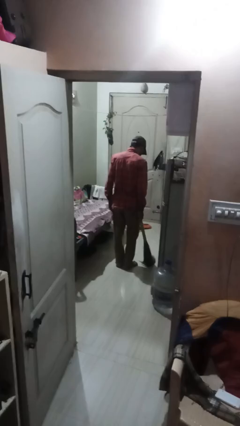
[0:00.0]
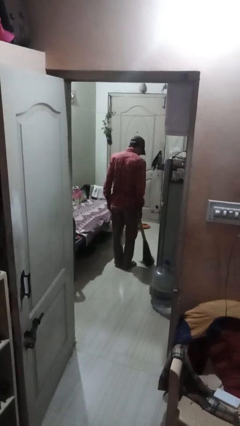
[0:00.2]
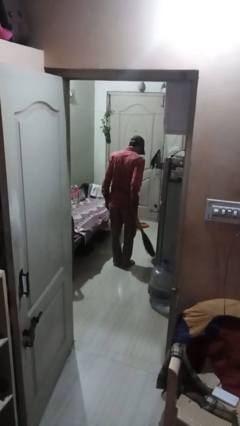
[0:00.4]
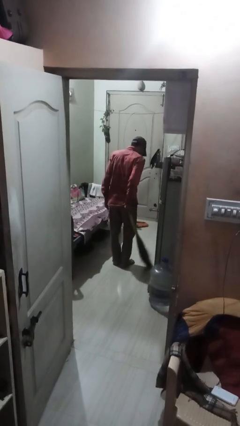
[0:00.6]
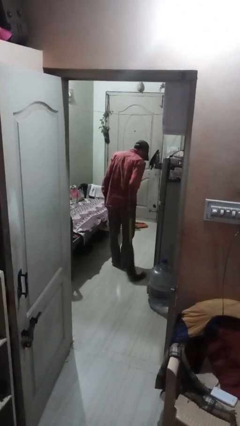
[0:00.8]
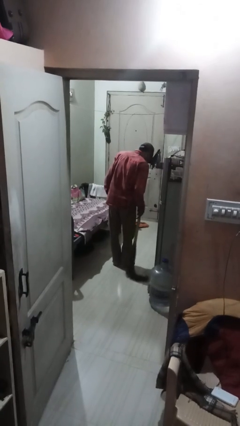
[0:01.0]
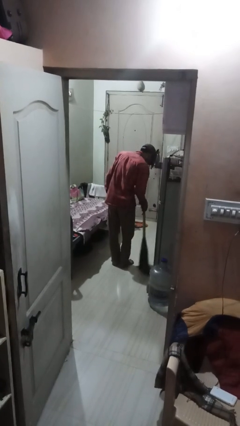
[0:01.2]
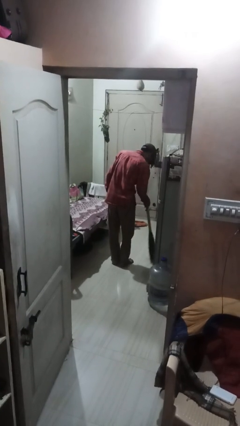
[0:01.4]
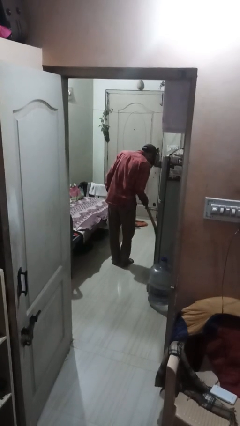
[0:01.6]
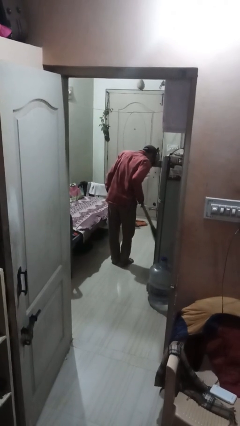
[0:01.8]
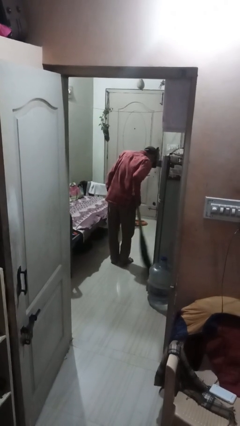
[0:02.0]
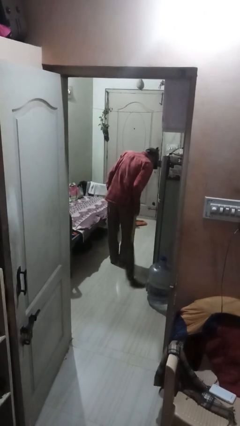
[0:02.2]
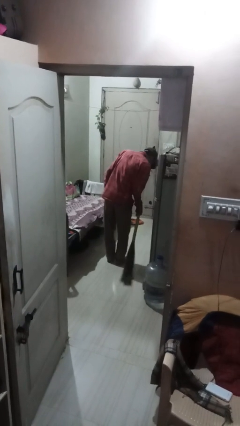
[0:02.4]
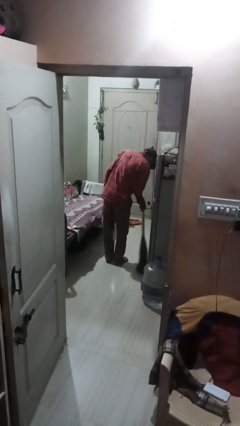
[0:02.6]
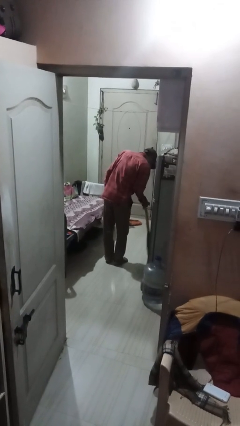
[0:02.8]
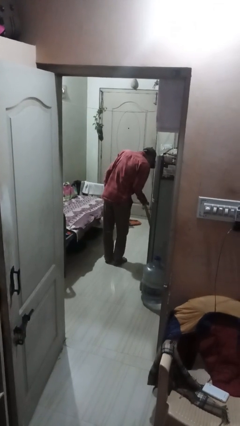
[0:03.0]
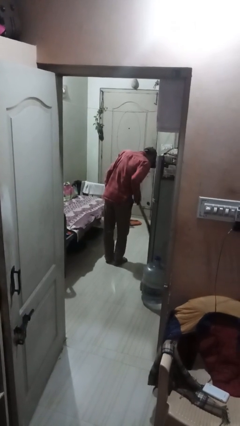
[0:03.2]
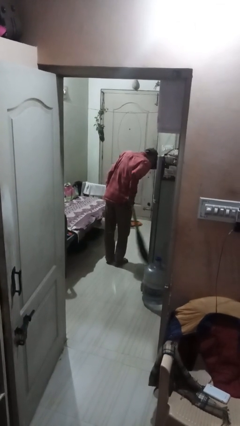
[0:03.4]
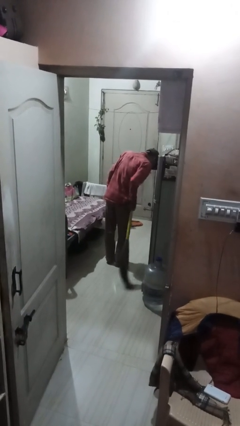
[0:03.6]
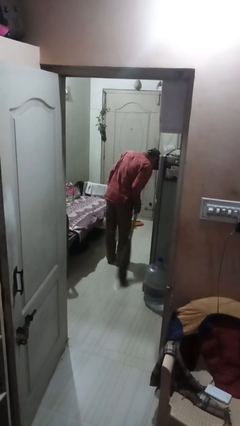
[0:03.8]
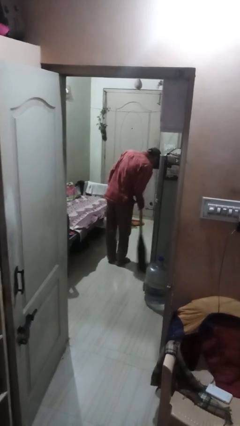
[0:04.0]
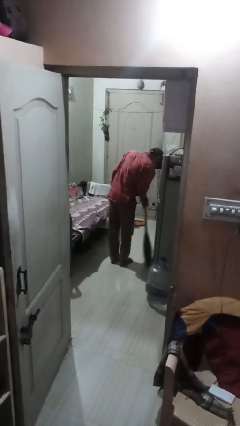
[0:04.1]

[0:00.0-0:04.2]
person sweeps floor

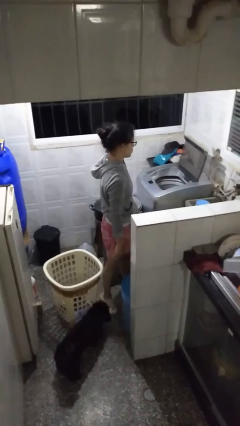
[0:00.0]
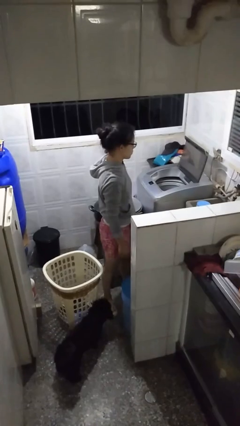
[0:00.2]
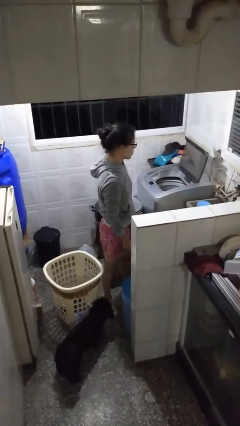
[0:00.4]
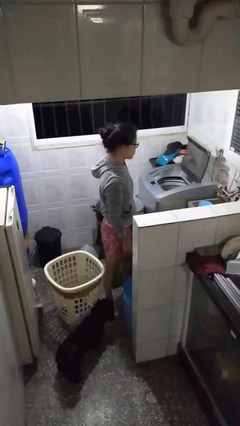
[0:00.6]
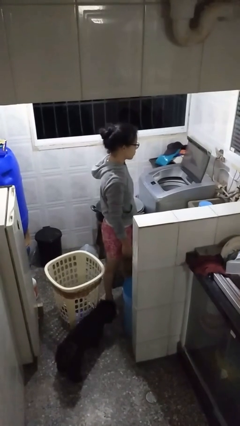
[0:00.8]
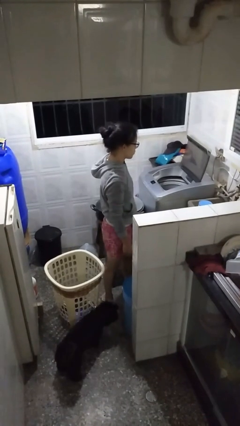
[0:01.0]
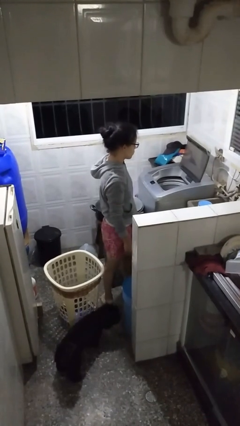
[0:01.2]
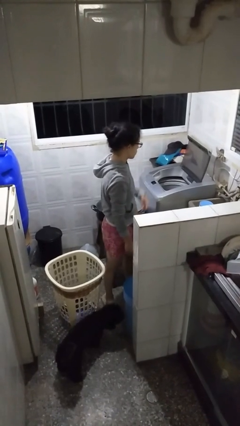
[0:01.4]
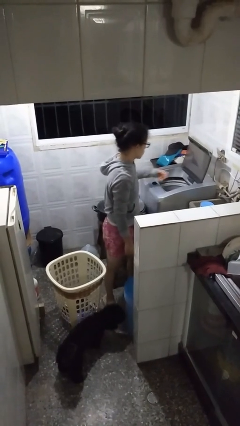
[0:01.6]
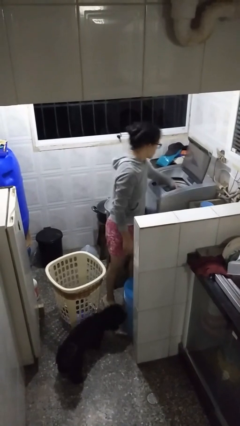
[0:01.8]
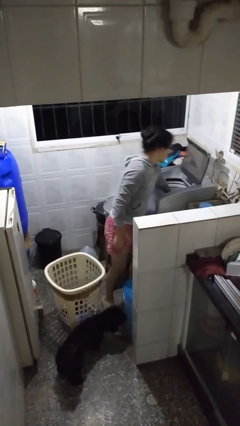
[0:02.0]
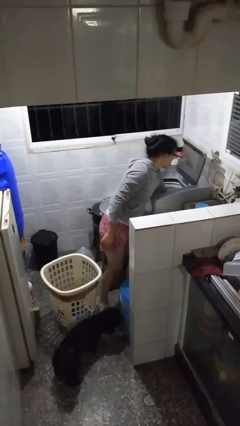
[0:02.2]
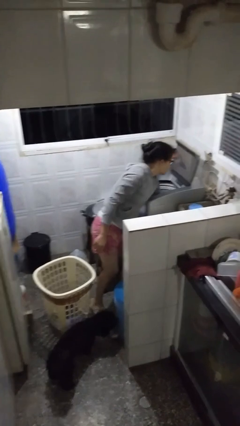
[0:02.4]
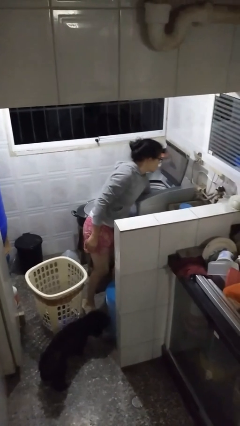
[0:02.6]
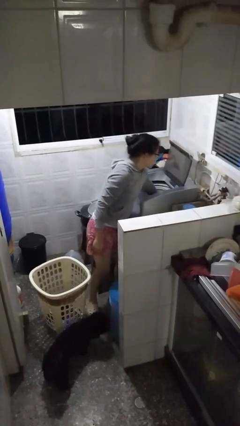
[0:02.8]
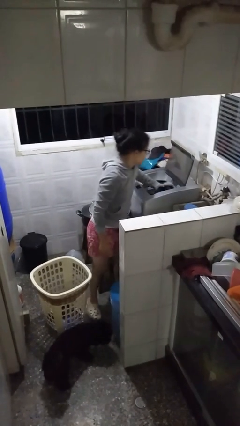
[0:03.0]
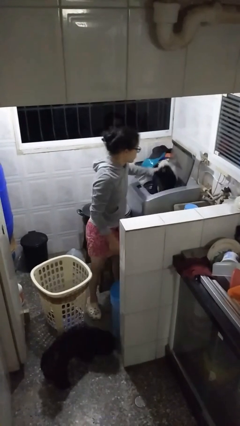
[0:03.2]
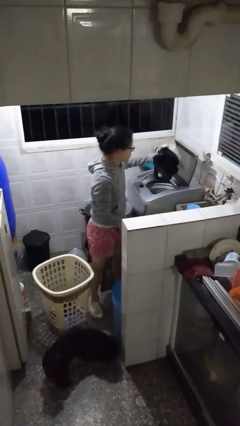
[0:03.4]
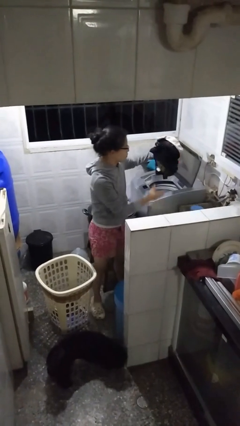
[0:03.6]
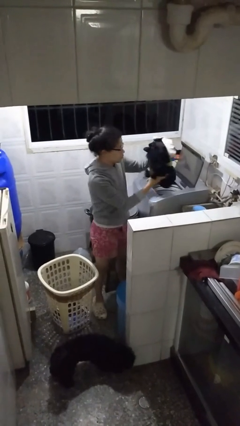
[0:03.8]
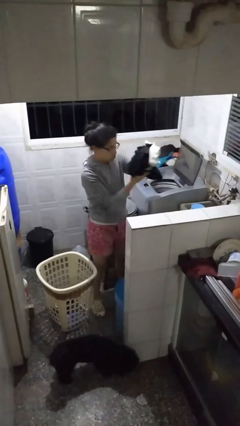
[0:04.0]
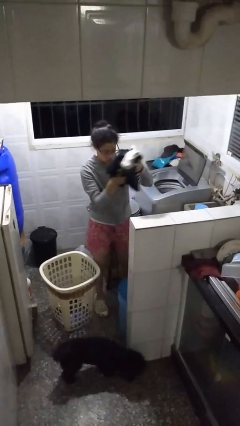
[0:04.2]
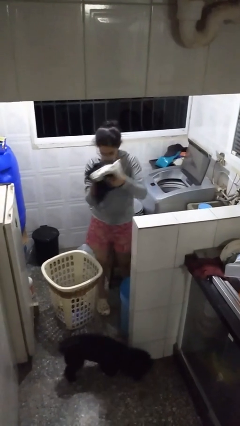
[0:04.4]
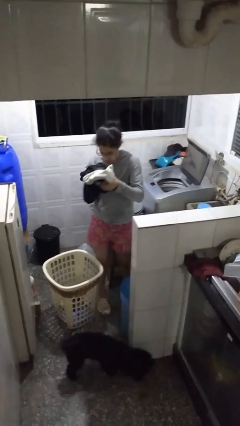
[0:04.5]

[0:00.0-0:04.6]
person loads clotheswasher

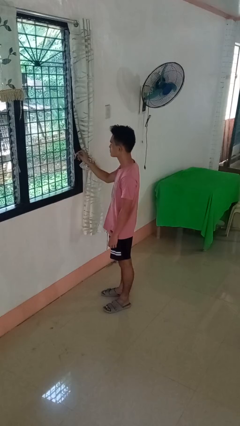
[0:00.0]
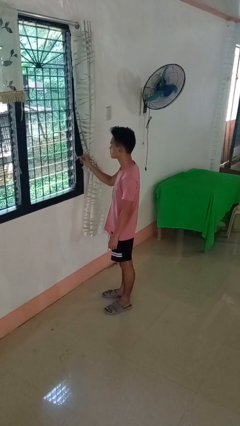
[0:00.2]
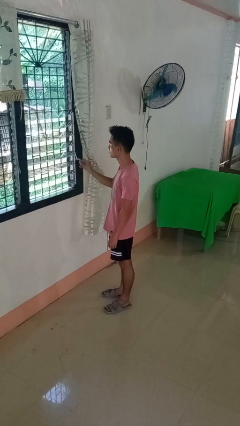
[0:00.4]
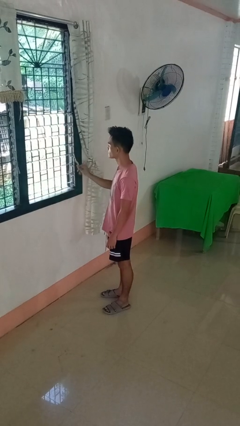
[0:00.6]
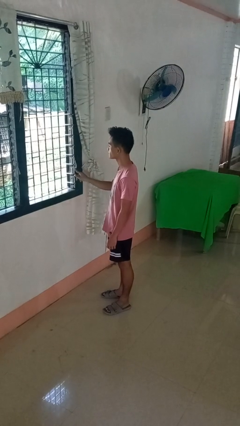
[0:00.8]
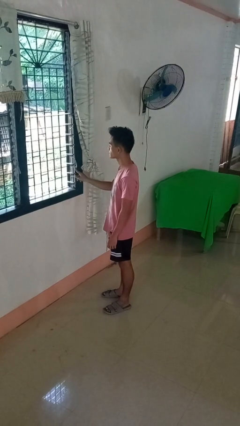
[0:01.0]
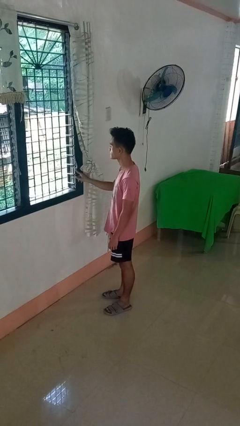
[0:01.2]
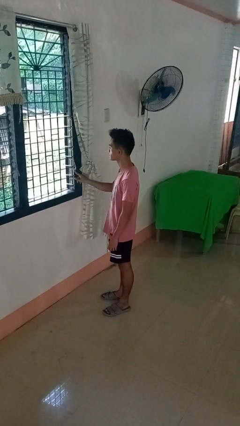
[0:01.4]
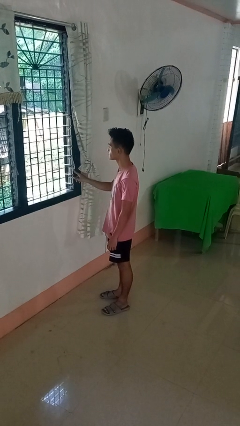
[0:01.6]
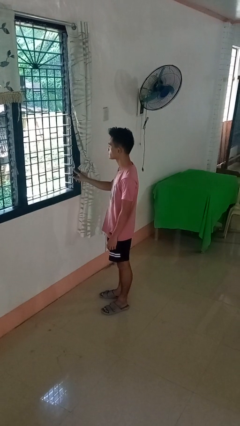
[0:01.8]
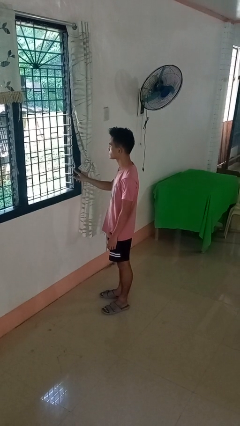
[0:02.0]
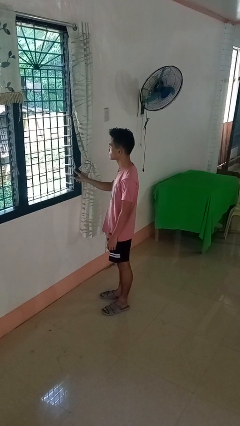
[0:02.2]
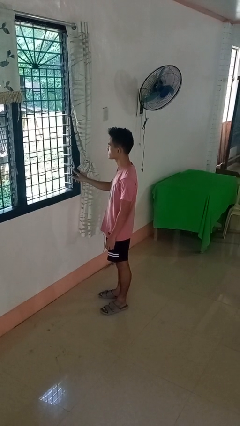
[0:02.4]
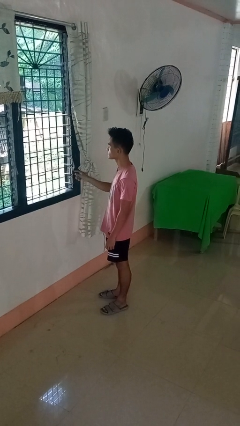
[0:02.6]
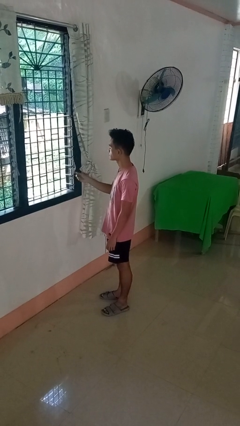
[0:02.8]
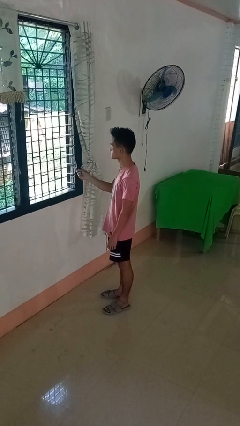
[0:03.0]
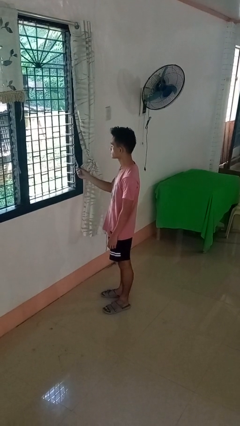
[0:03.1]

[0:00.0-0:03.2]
person opens home window

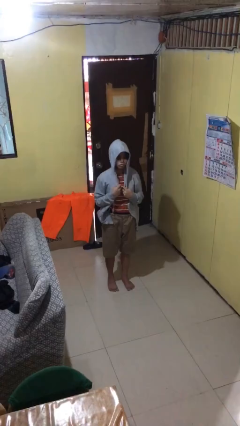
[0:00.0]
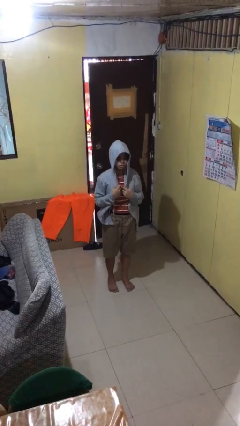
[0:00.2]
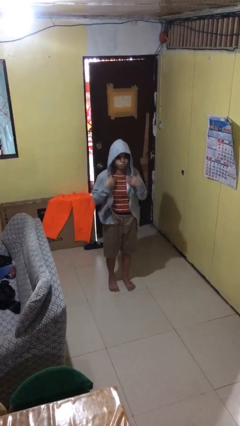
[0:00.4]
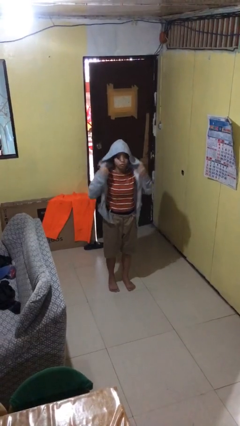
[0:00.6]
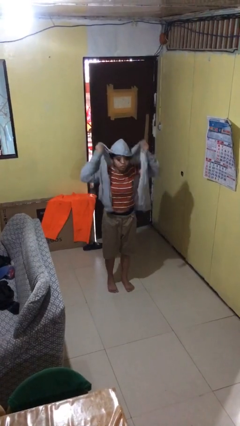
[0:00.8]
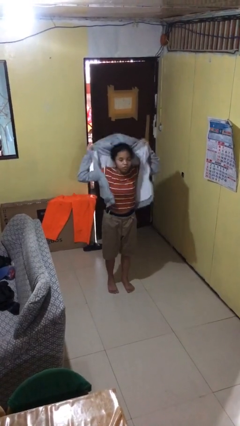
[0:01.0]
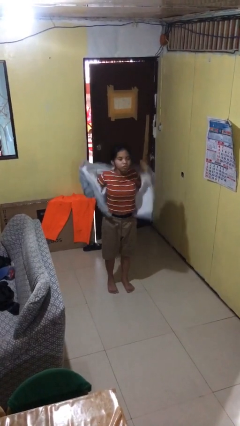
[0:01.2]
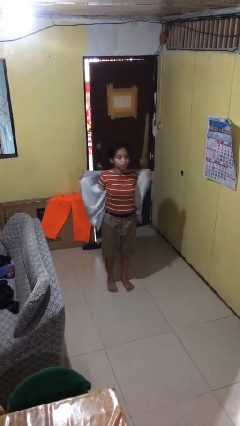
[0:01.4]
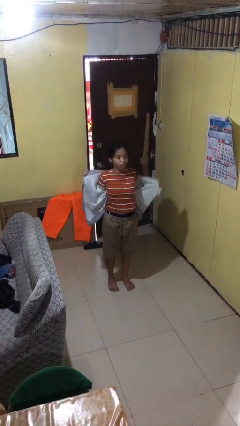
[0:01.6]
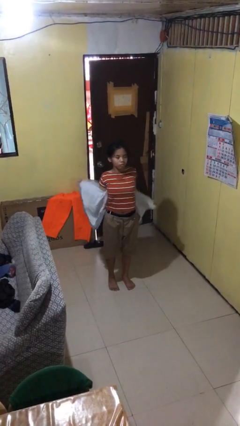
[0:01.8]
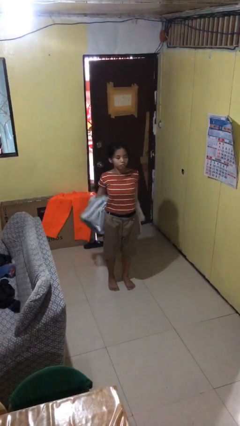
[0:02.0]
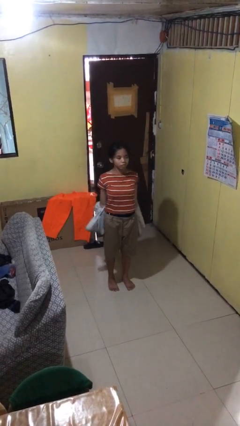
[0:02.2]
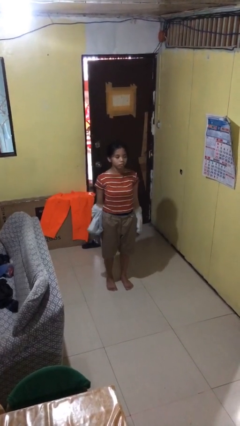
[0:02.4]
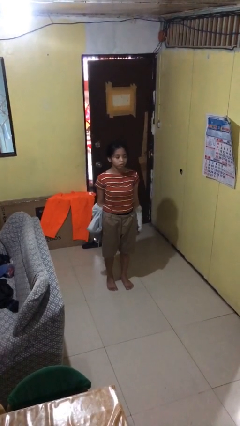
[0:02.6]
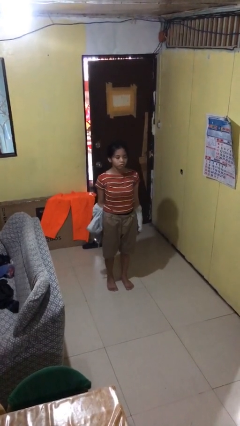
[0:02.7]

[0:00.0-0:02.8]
person takes off hoodie

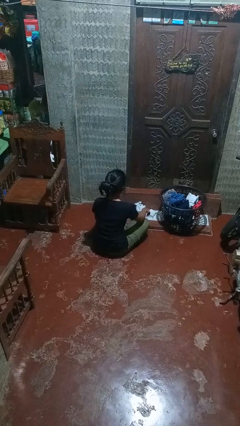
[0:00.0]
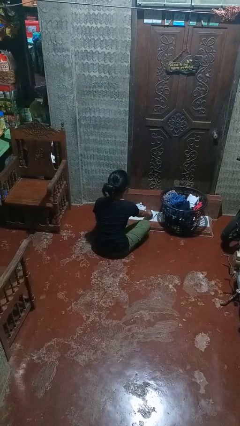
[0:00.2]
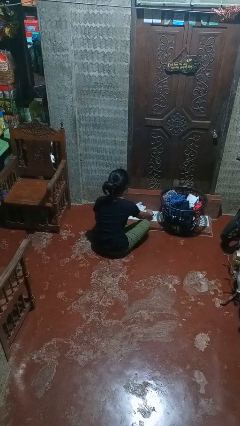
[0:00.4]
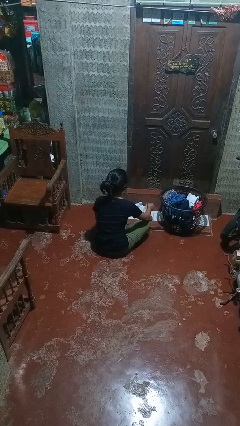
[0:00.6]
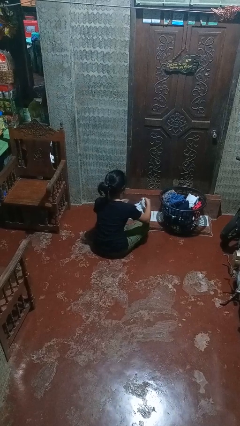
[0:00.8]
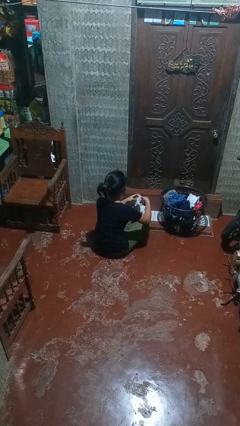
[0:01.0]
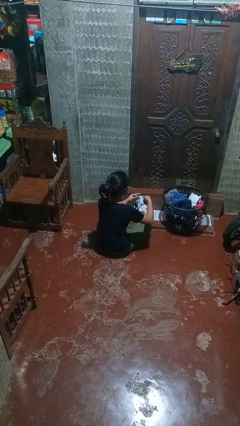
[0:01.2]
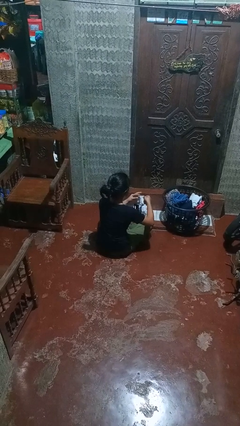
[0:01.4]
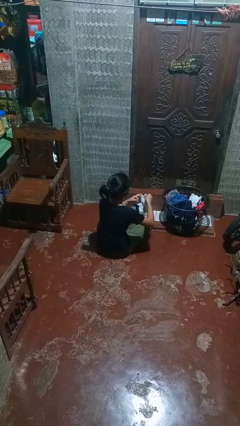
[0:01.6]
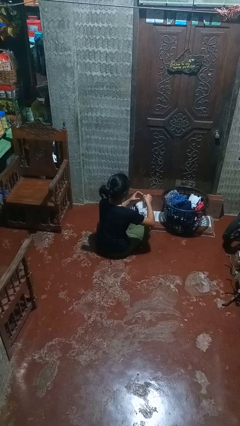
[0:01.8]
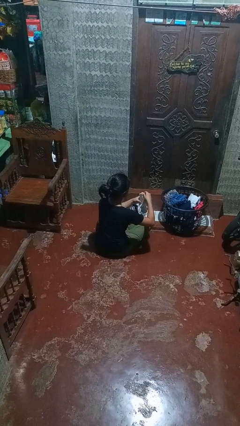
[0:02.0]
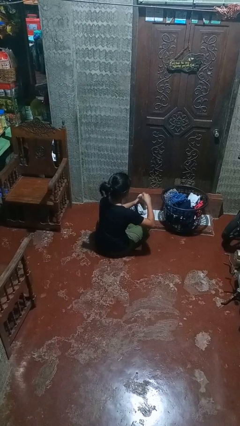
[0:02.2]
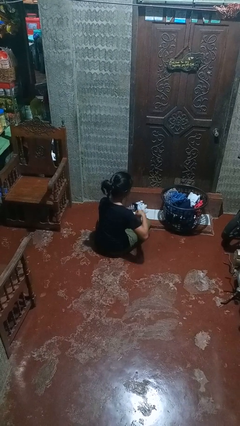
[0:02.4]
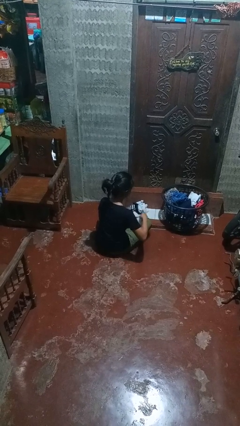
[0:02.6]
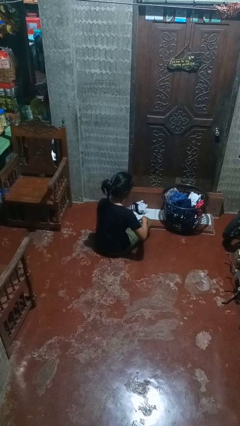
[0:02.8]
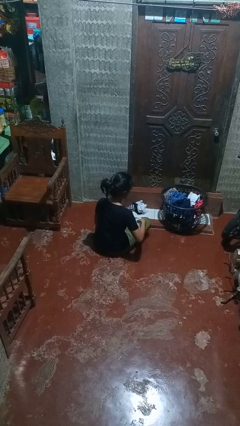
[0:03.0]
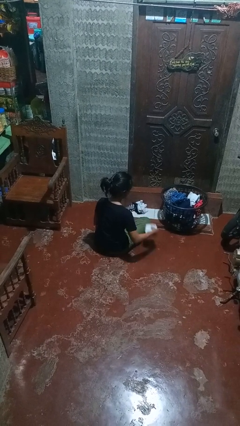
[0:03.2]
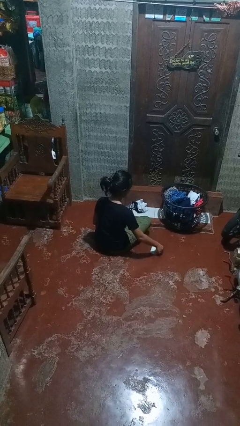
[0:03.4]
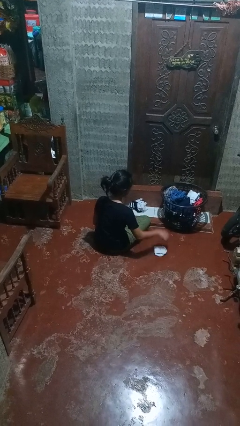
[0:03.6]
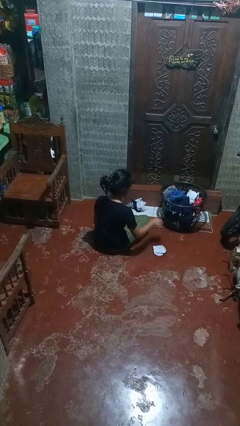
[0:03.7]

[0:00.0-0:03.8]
person folds socks
